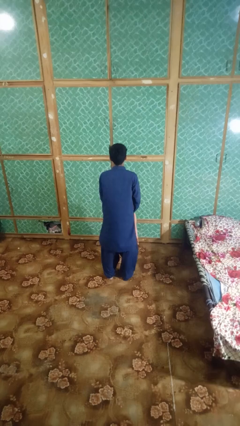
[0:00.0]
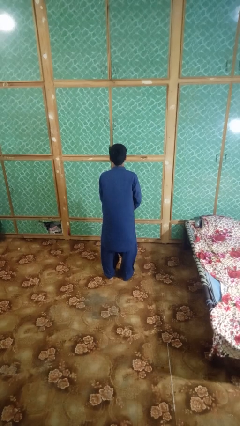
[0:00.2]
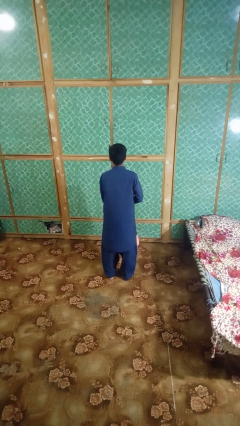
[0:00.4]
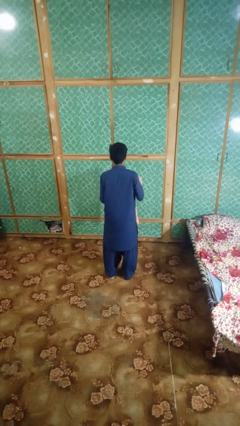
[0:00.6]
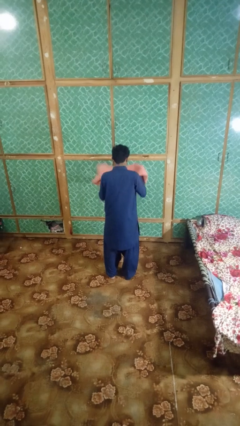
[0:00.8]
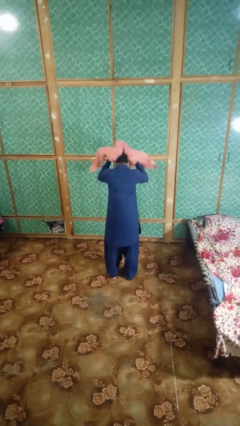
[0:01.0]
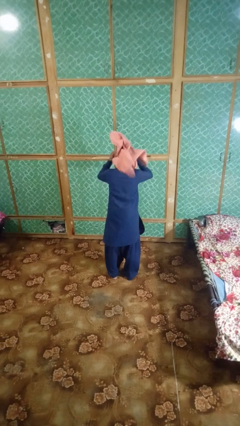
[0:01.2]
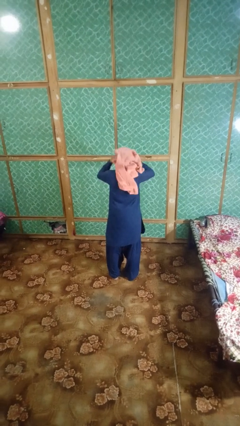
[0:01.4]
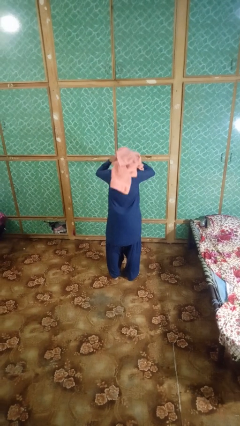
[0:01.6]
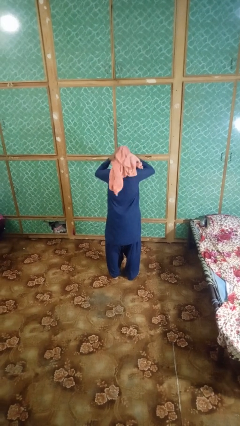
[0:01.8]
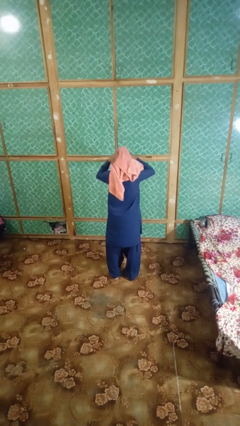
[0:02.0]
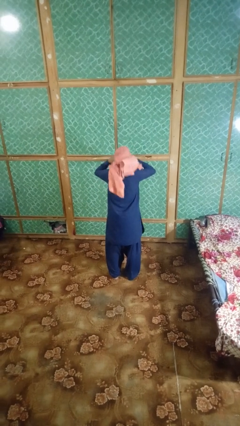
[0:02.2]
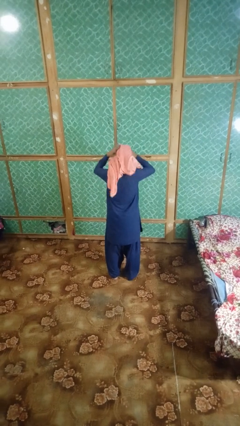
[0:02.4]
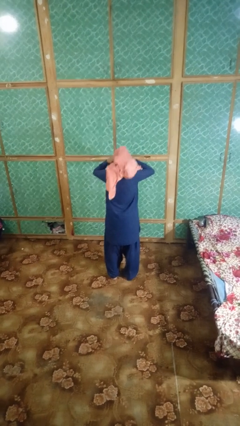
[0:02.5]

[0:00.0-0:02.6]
person dries hair with towel

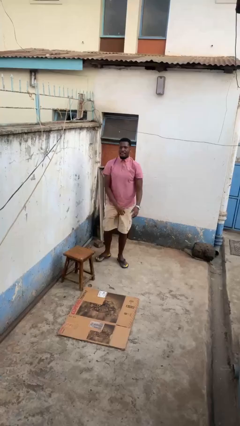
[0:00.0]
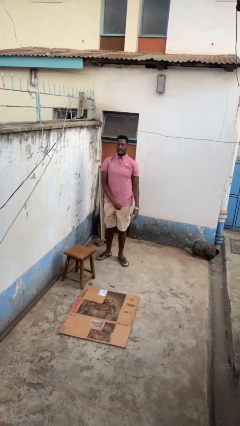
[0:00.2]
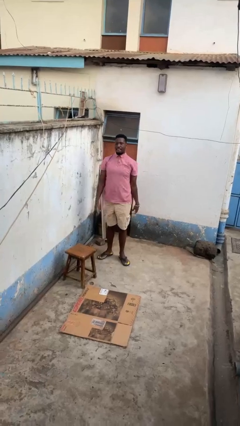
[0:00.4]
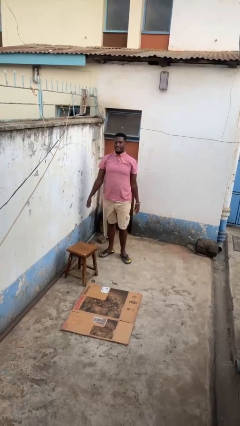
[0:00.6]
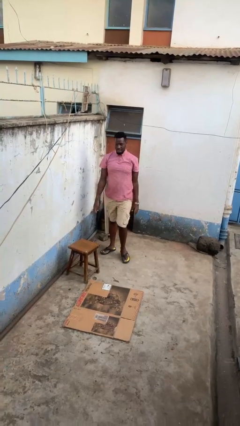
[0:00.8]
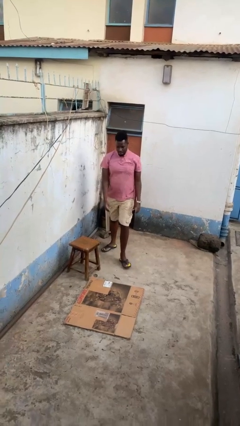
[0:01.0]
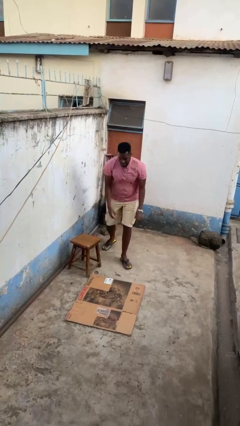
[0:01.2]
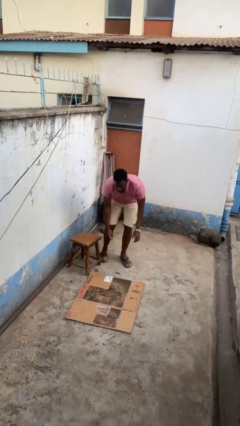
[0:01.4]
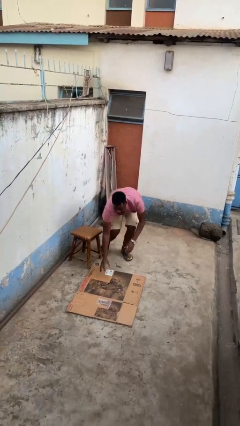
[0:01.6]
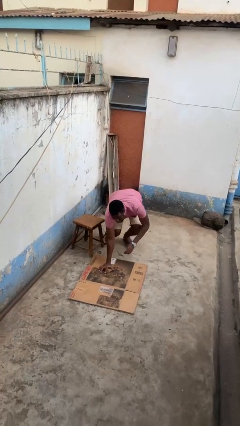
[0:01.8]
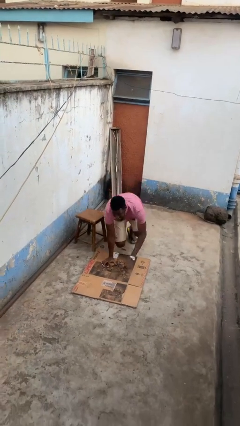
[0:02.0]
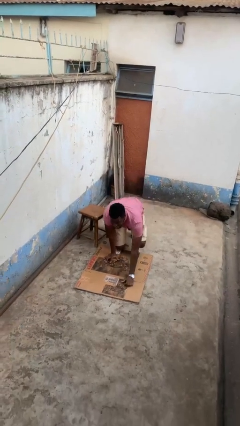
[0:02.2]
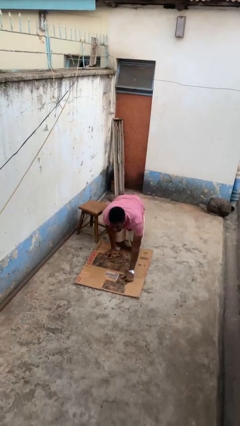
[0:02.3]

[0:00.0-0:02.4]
person trips on object on floor

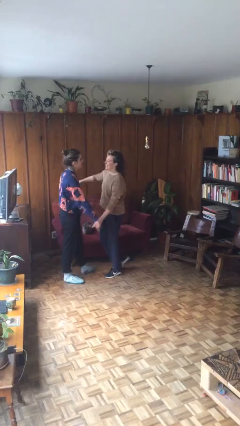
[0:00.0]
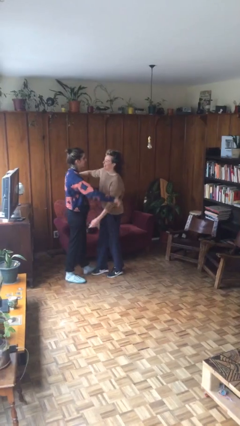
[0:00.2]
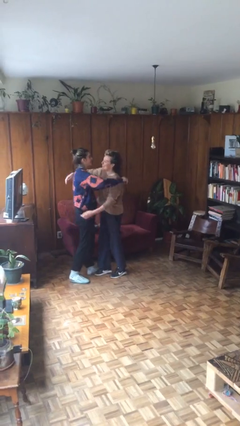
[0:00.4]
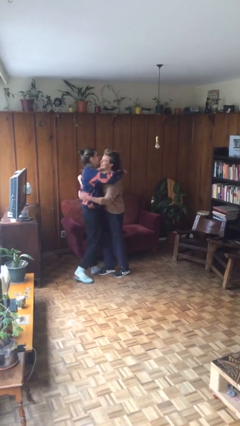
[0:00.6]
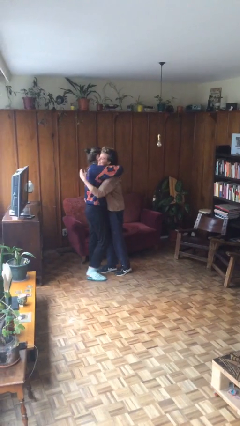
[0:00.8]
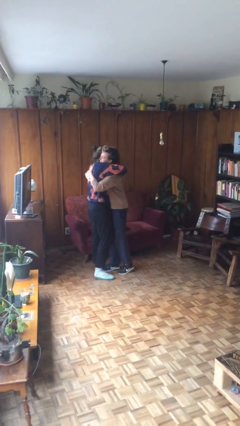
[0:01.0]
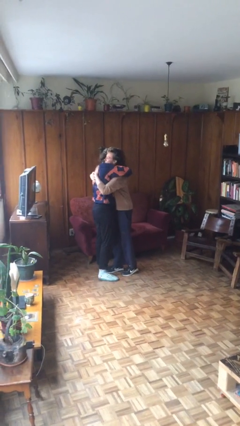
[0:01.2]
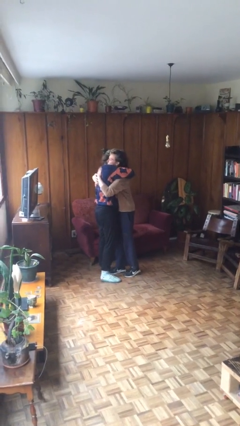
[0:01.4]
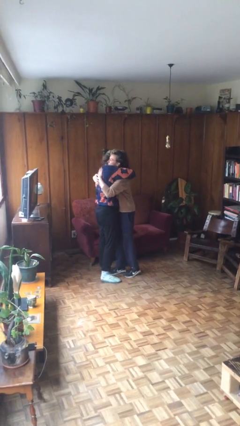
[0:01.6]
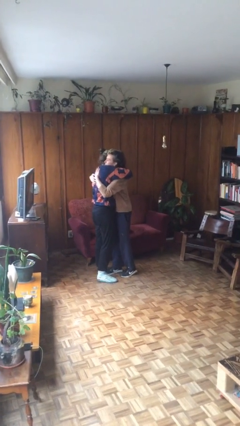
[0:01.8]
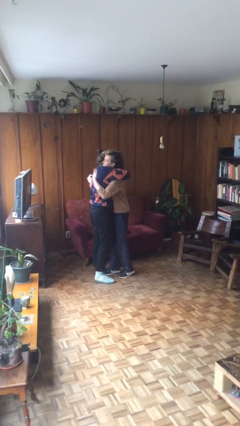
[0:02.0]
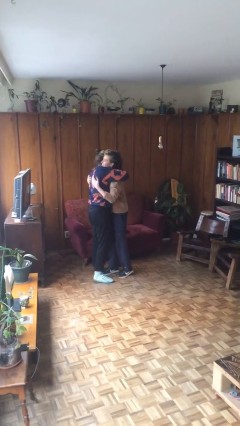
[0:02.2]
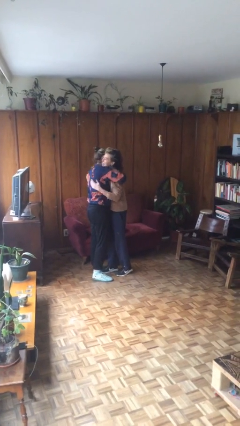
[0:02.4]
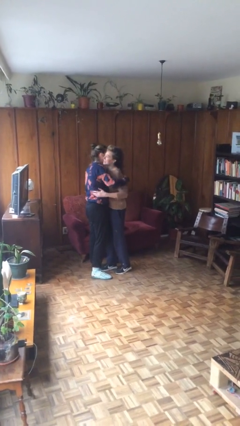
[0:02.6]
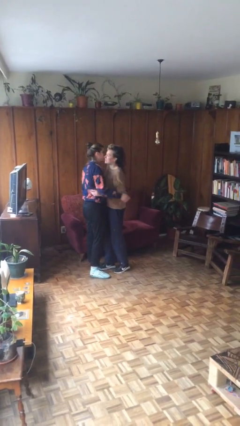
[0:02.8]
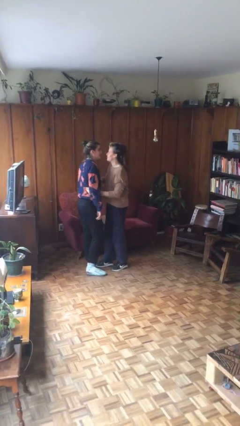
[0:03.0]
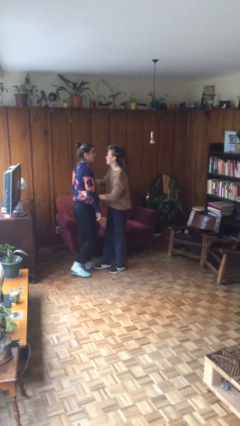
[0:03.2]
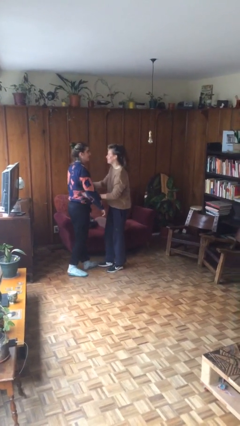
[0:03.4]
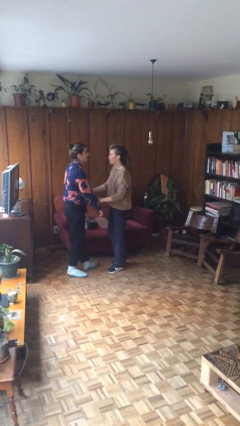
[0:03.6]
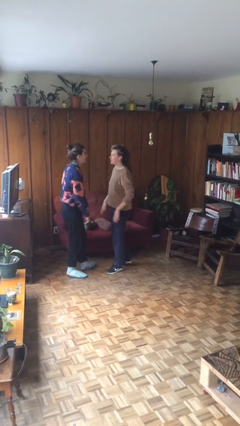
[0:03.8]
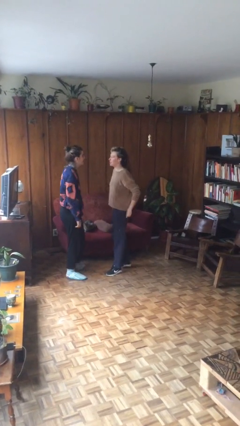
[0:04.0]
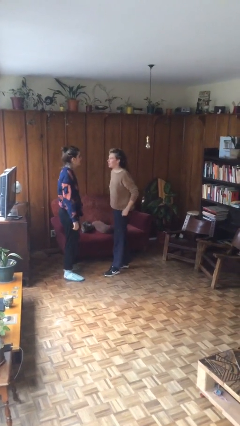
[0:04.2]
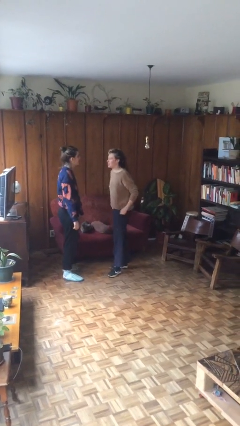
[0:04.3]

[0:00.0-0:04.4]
person embraces person

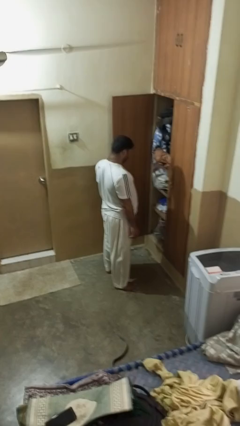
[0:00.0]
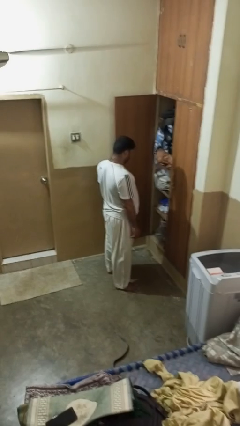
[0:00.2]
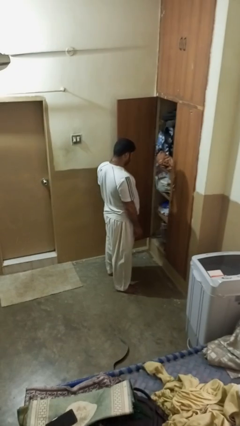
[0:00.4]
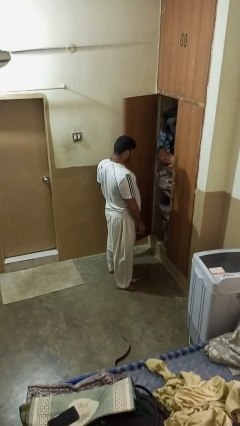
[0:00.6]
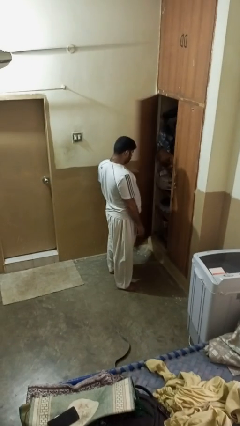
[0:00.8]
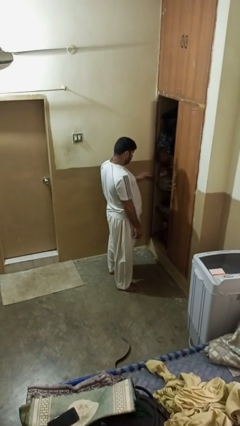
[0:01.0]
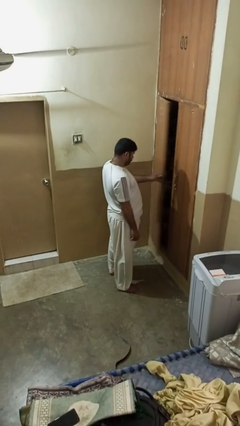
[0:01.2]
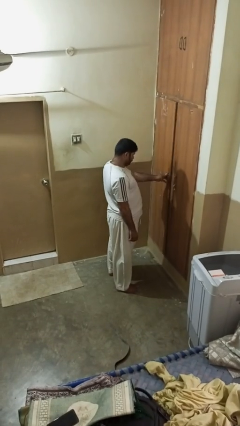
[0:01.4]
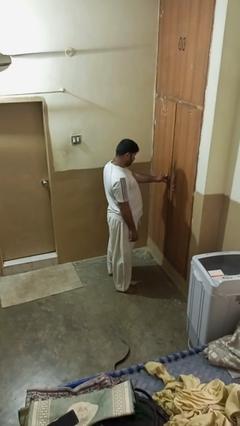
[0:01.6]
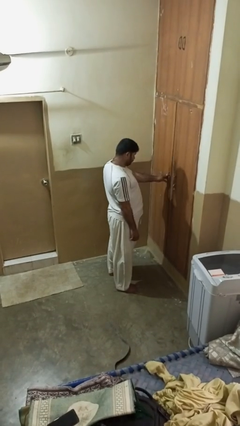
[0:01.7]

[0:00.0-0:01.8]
person closes closet door

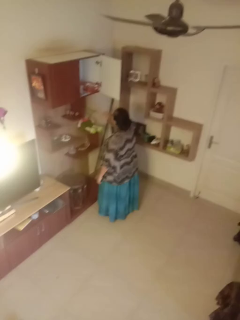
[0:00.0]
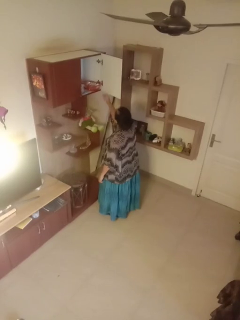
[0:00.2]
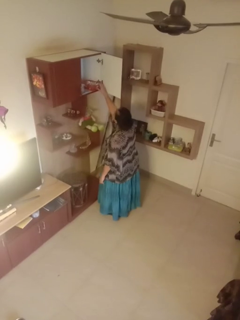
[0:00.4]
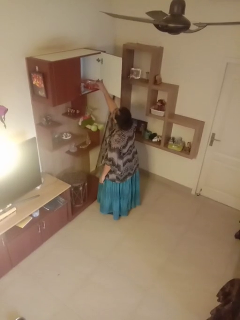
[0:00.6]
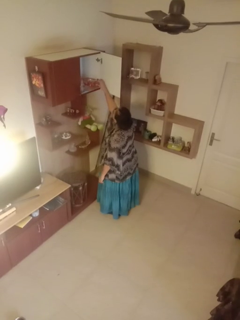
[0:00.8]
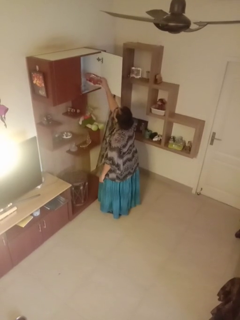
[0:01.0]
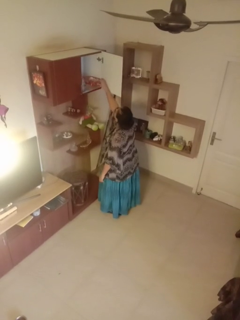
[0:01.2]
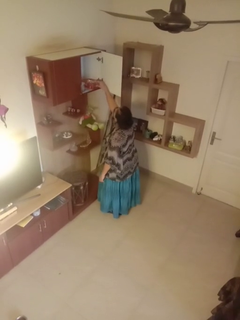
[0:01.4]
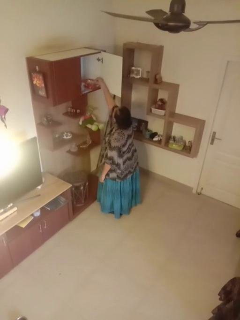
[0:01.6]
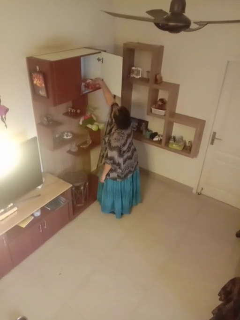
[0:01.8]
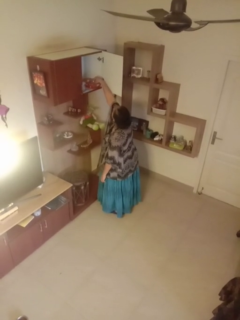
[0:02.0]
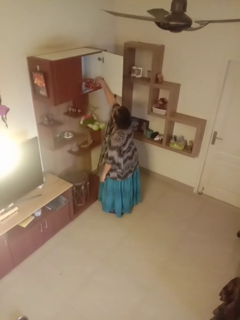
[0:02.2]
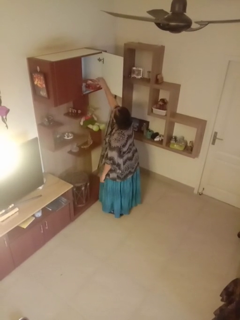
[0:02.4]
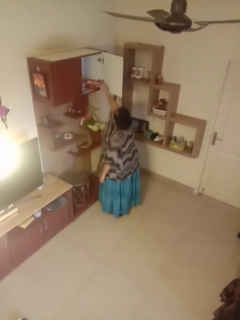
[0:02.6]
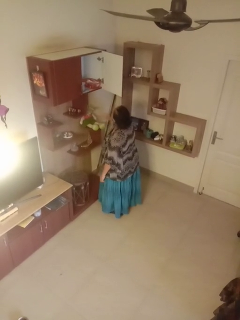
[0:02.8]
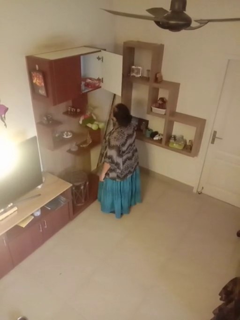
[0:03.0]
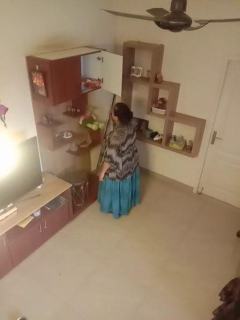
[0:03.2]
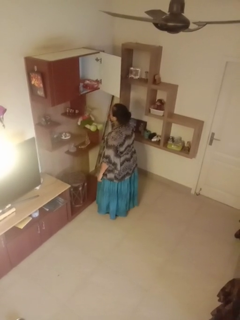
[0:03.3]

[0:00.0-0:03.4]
person searches in cabinet

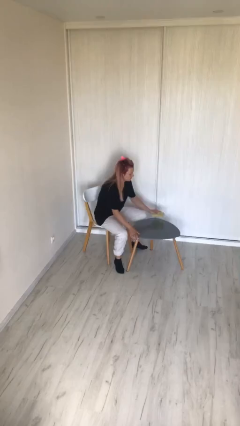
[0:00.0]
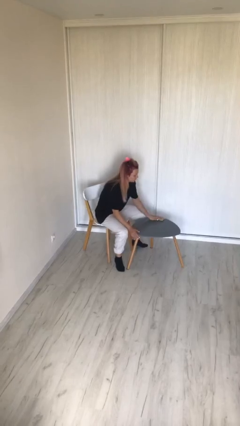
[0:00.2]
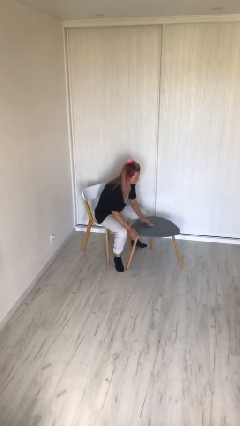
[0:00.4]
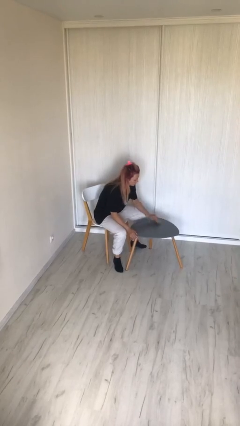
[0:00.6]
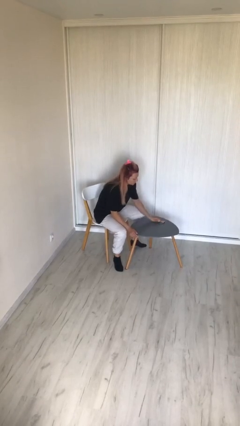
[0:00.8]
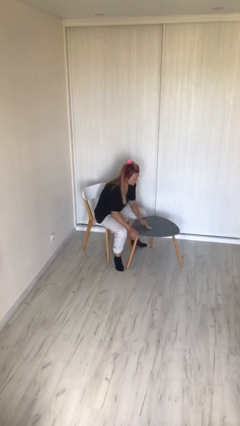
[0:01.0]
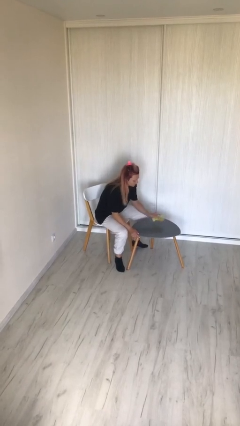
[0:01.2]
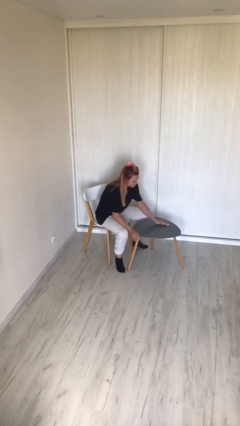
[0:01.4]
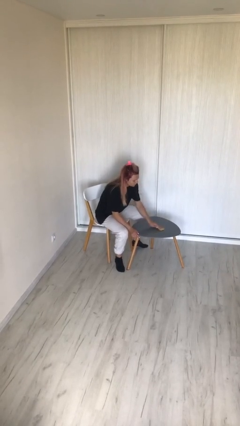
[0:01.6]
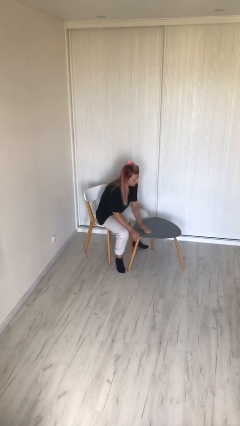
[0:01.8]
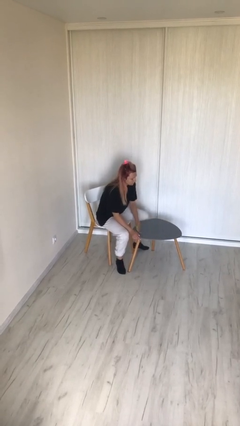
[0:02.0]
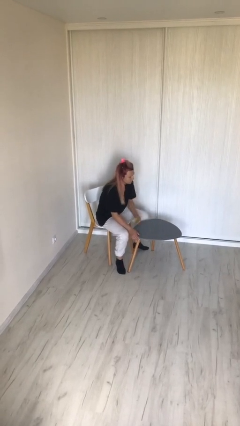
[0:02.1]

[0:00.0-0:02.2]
person cleans table with rag

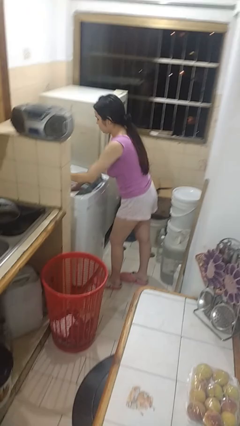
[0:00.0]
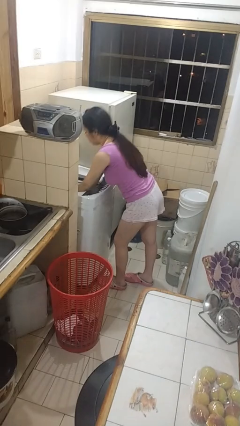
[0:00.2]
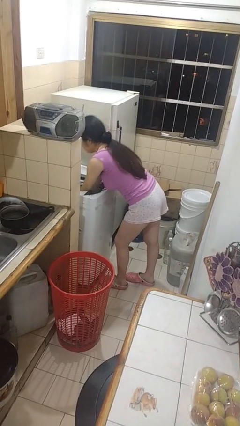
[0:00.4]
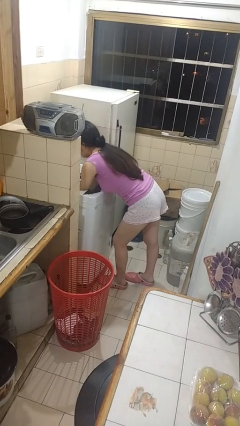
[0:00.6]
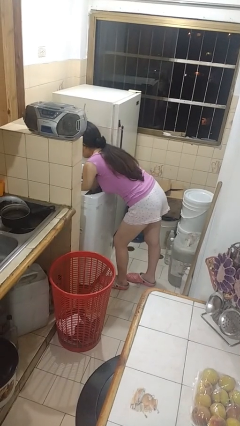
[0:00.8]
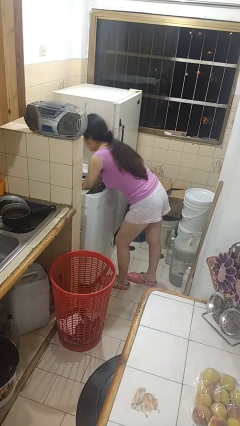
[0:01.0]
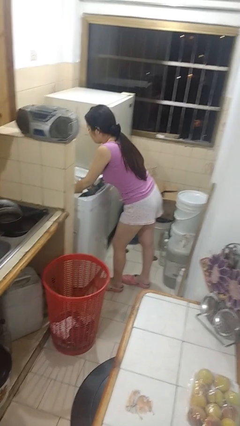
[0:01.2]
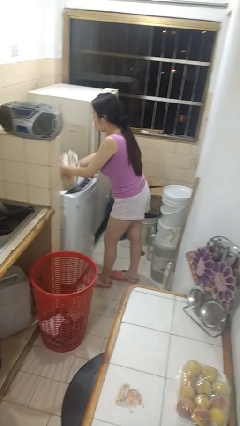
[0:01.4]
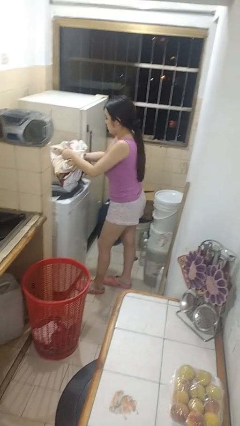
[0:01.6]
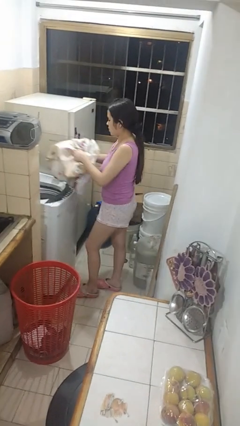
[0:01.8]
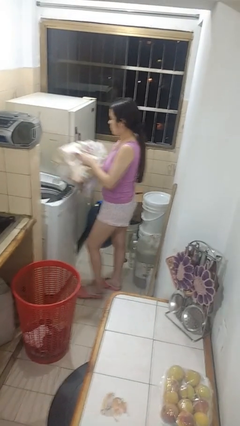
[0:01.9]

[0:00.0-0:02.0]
person unloads clotheswasher
